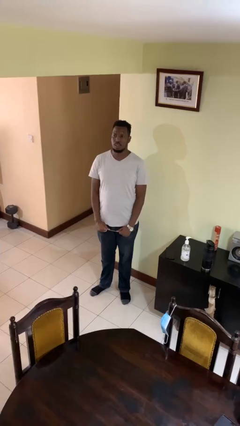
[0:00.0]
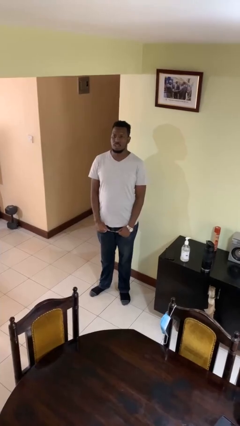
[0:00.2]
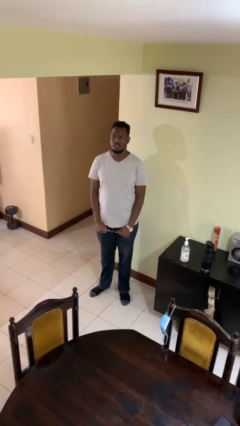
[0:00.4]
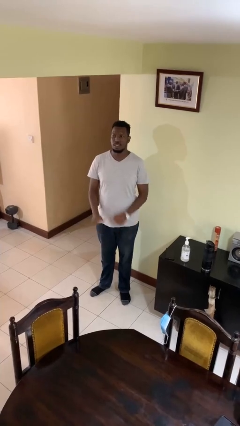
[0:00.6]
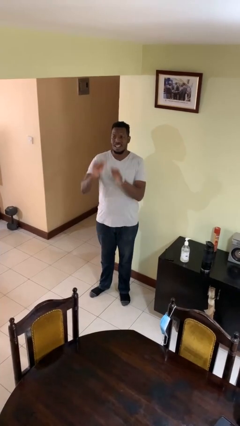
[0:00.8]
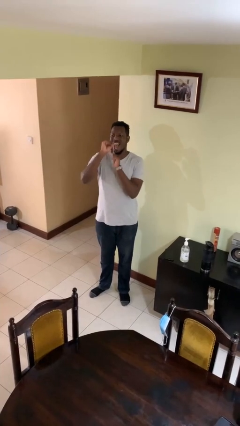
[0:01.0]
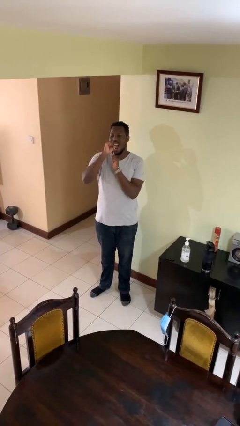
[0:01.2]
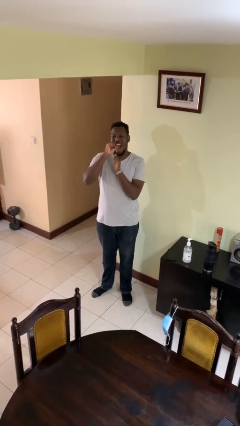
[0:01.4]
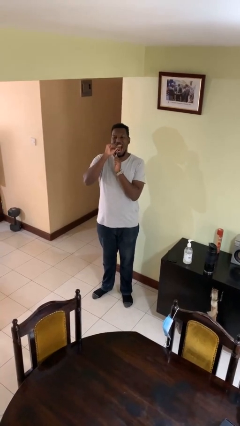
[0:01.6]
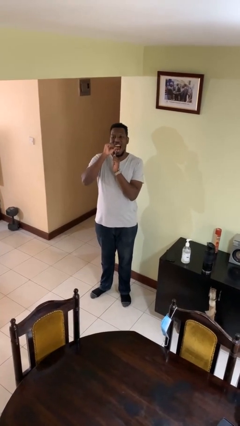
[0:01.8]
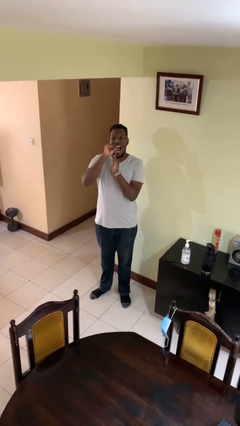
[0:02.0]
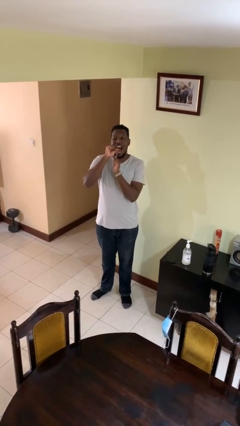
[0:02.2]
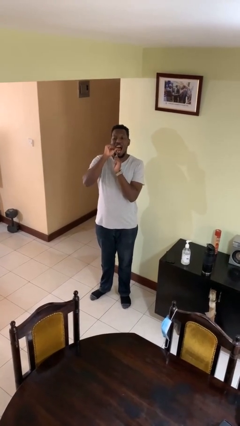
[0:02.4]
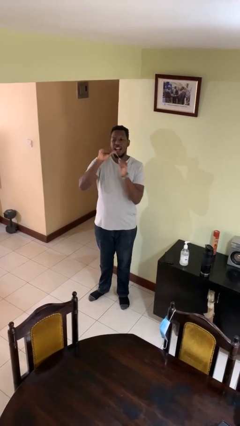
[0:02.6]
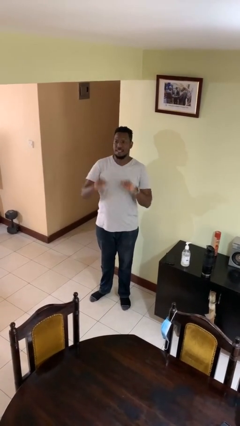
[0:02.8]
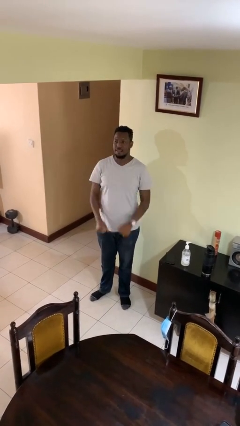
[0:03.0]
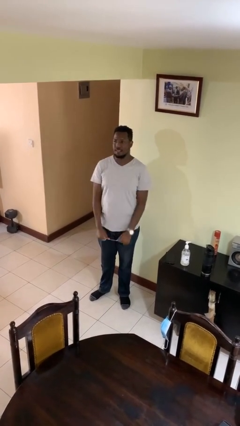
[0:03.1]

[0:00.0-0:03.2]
person flosses

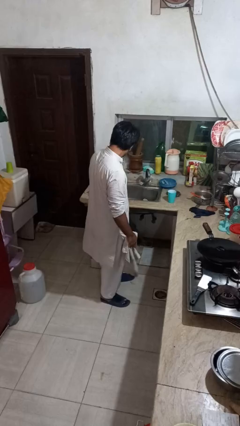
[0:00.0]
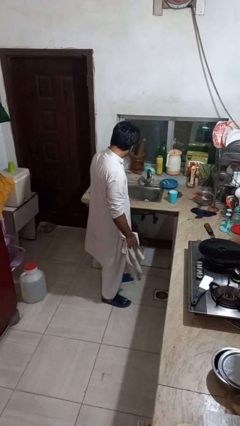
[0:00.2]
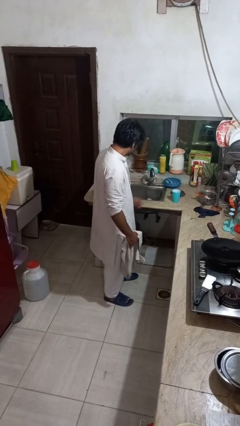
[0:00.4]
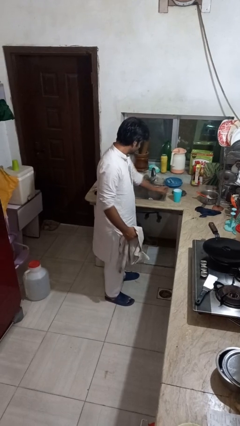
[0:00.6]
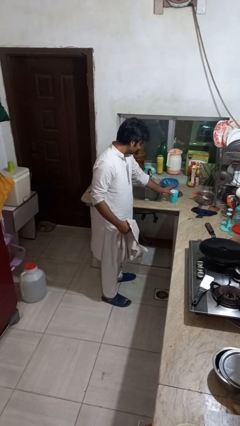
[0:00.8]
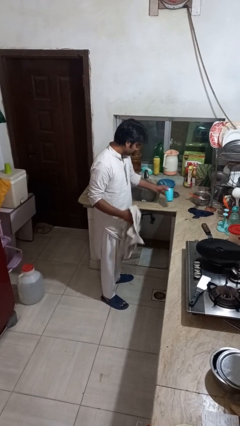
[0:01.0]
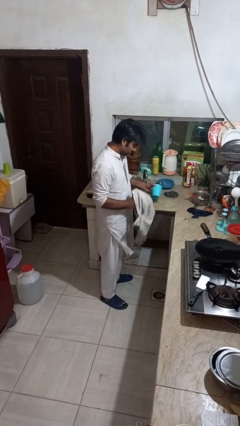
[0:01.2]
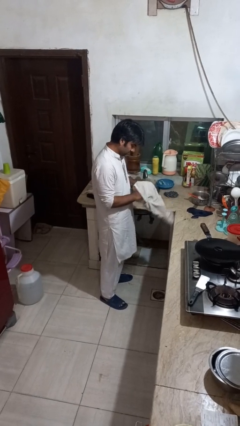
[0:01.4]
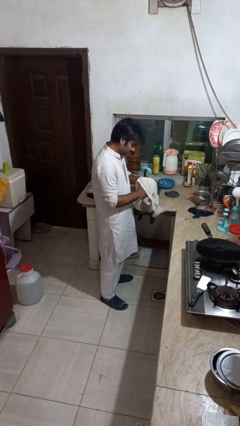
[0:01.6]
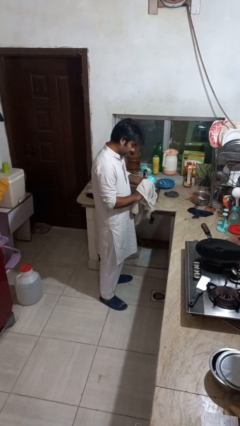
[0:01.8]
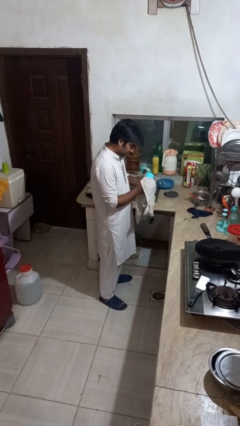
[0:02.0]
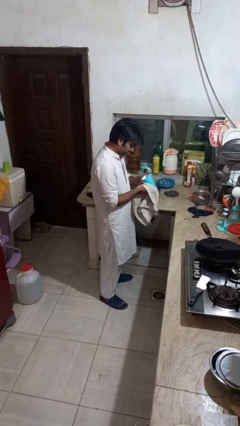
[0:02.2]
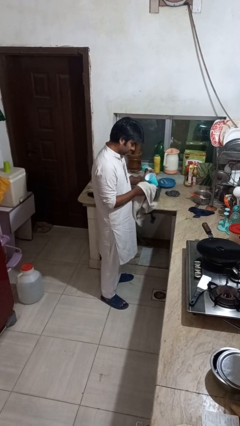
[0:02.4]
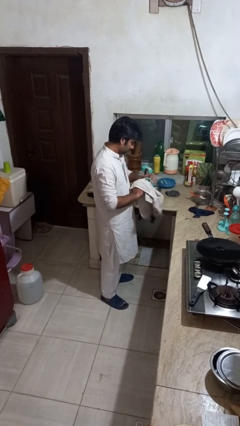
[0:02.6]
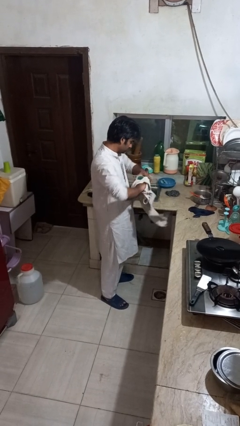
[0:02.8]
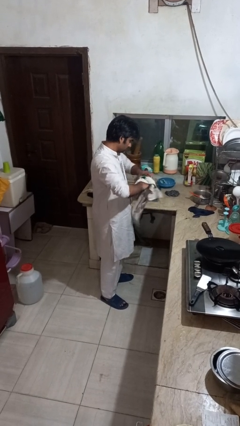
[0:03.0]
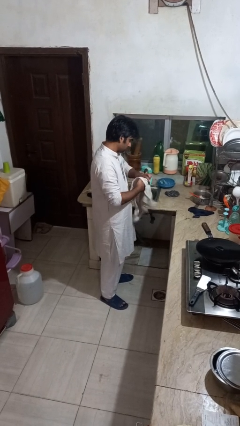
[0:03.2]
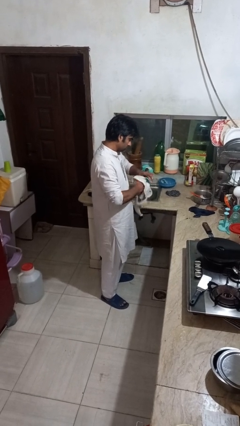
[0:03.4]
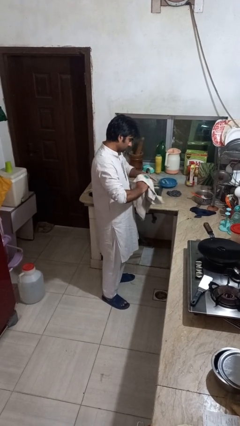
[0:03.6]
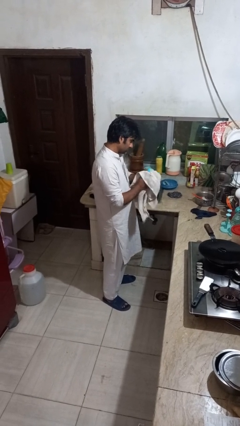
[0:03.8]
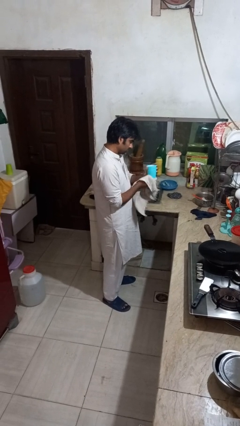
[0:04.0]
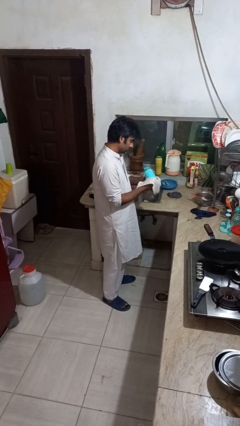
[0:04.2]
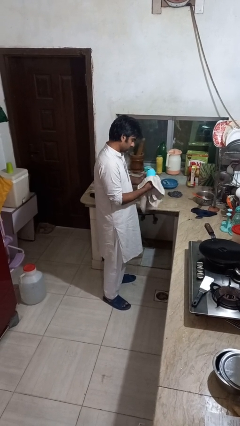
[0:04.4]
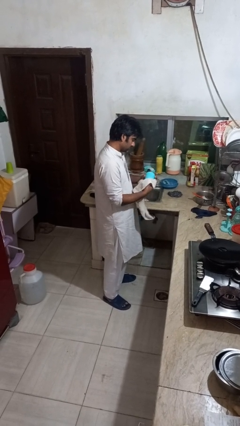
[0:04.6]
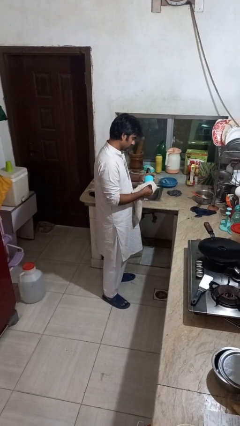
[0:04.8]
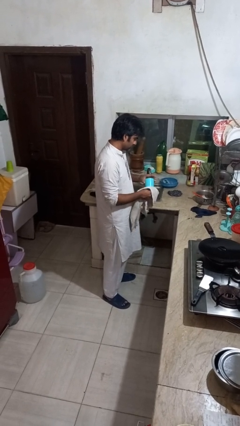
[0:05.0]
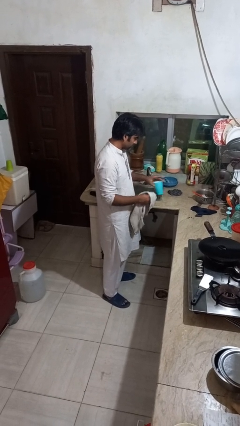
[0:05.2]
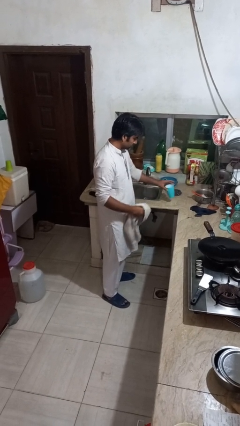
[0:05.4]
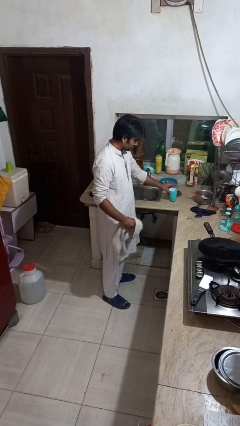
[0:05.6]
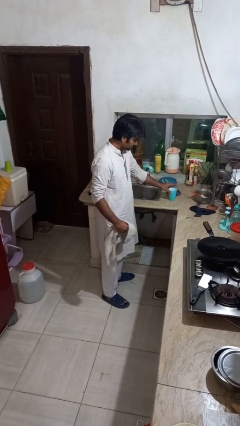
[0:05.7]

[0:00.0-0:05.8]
person dries dish

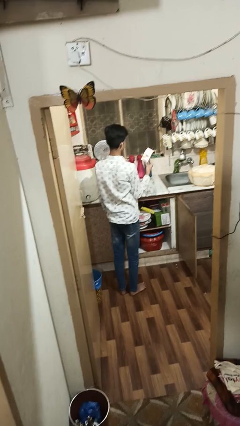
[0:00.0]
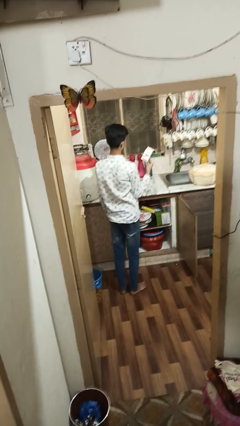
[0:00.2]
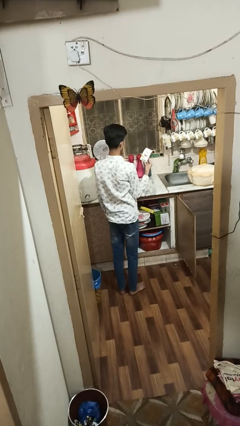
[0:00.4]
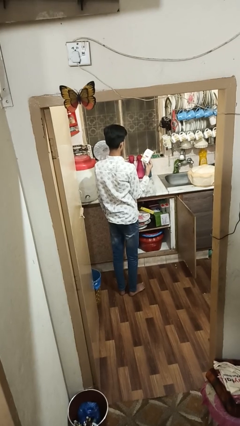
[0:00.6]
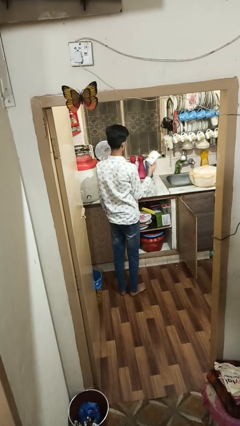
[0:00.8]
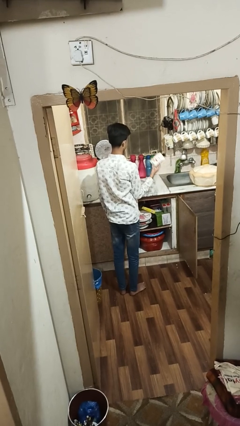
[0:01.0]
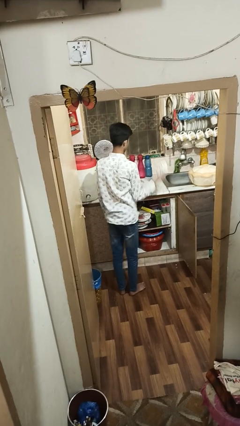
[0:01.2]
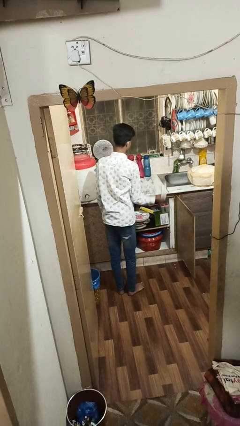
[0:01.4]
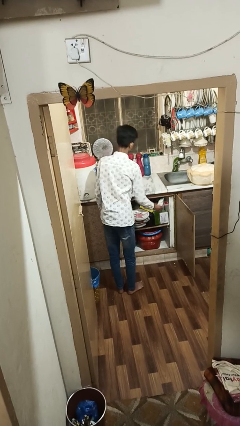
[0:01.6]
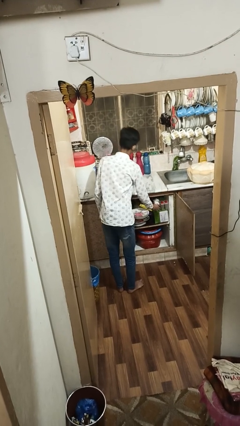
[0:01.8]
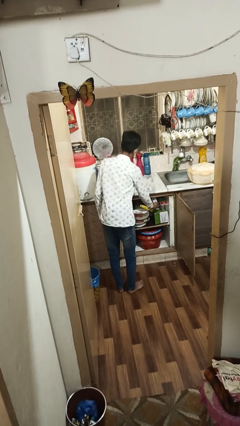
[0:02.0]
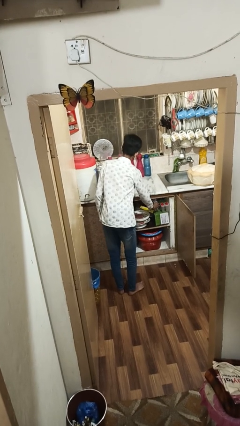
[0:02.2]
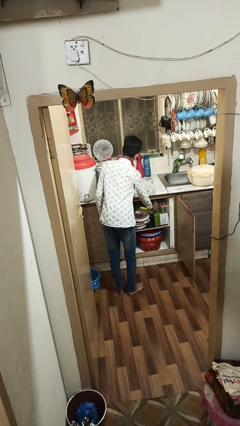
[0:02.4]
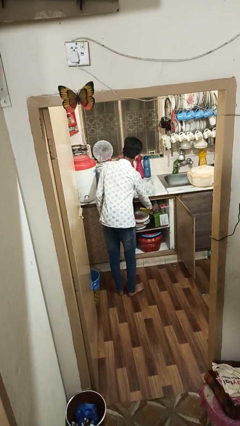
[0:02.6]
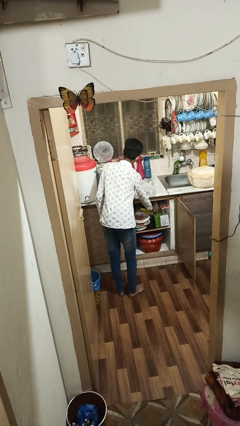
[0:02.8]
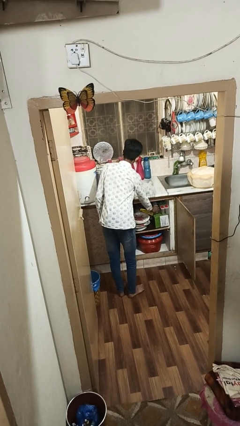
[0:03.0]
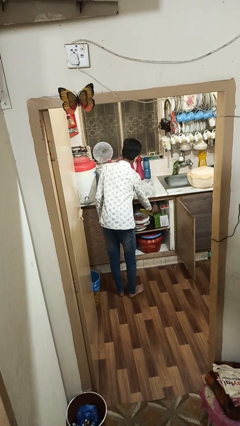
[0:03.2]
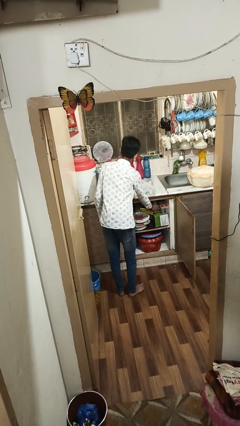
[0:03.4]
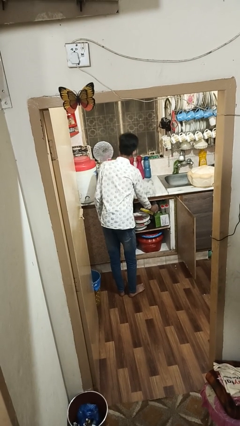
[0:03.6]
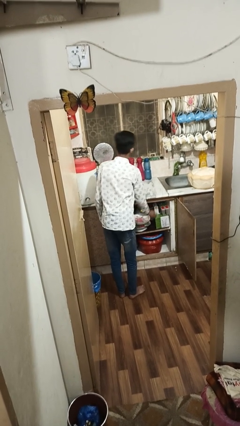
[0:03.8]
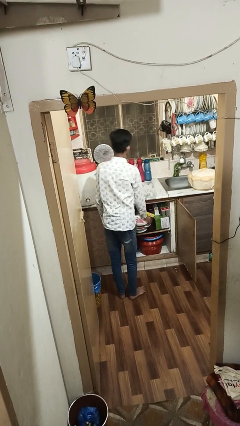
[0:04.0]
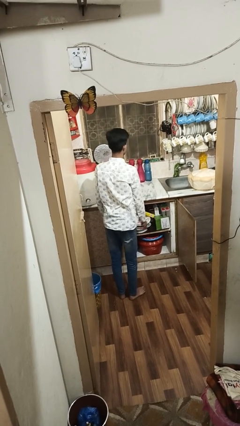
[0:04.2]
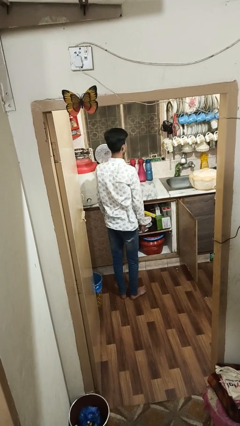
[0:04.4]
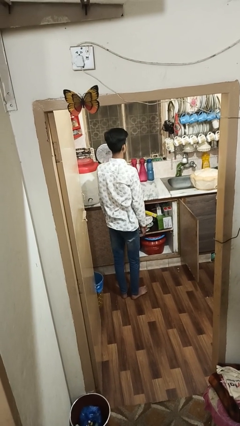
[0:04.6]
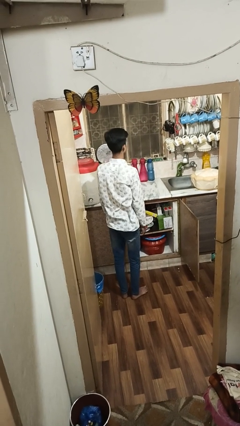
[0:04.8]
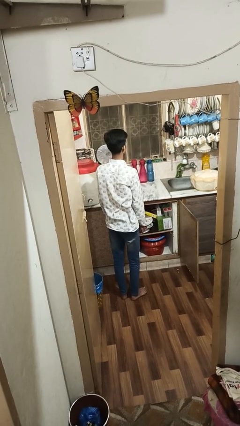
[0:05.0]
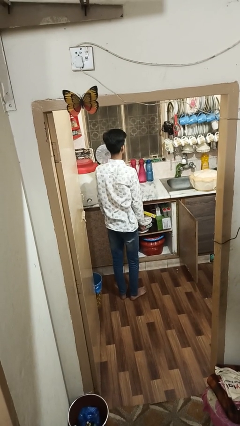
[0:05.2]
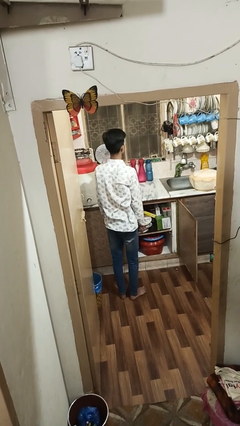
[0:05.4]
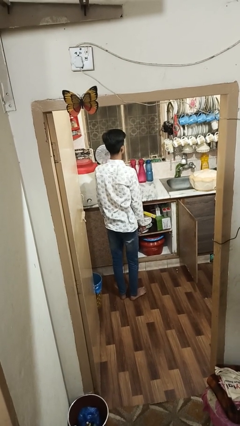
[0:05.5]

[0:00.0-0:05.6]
person puts object in cabinet

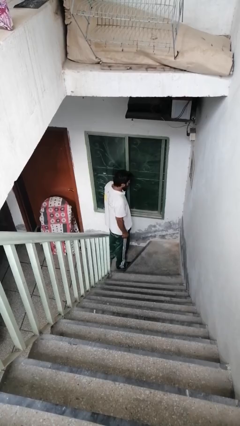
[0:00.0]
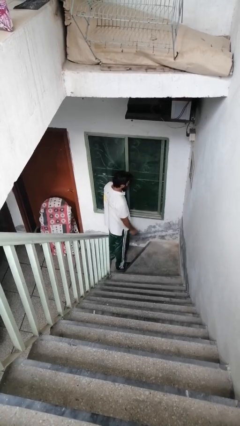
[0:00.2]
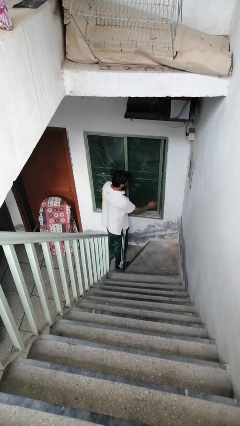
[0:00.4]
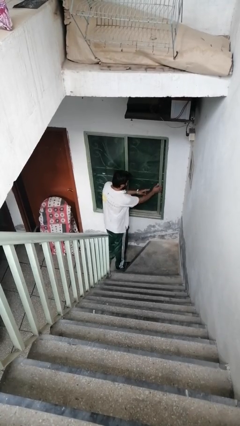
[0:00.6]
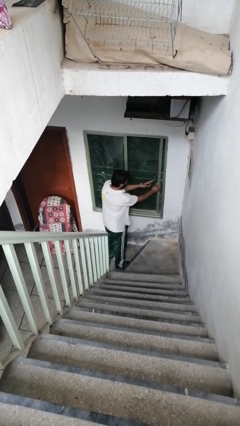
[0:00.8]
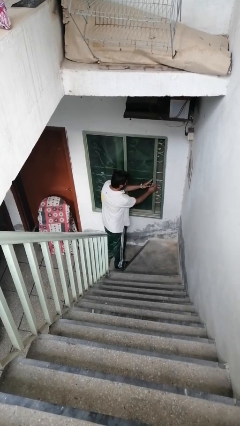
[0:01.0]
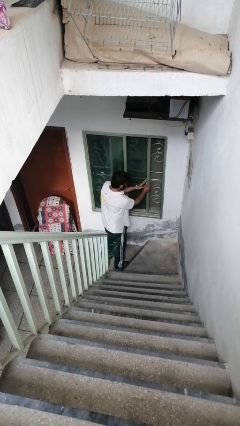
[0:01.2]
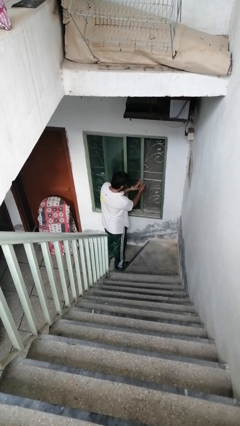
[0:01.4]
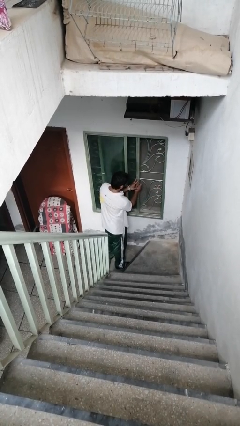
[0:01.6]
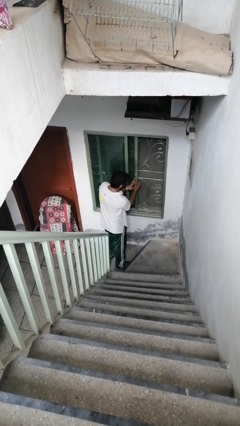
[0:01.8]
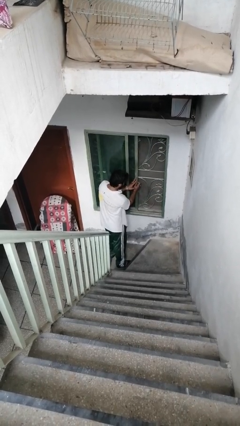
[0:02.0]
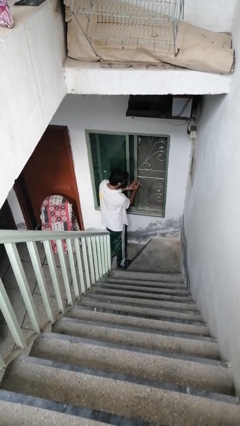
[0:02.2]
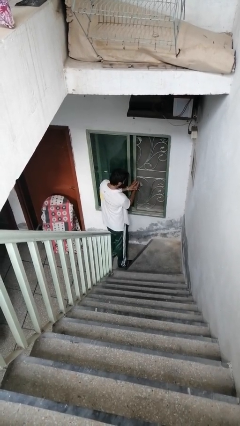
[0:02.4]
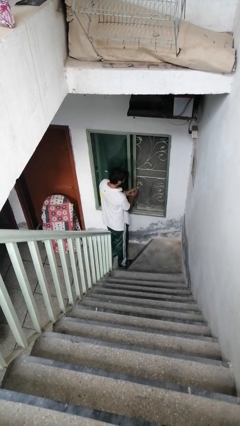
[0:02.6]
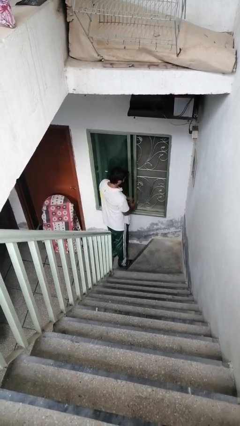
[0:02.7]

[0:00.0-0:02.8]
person opens home window

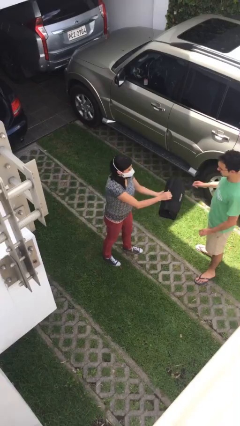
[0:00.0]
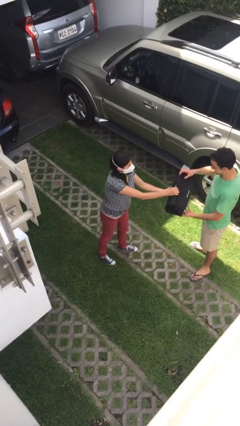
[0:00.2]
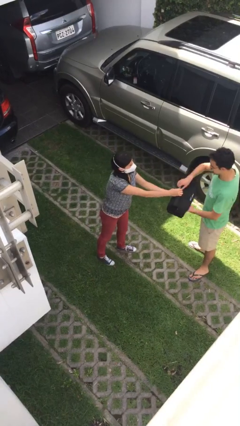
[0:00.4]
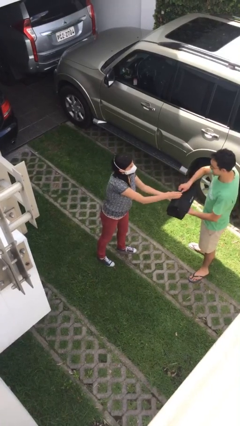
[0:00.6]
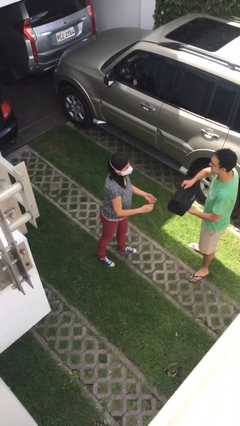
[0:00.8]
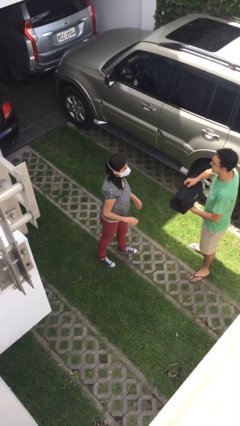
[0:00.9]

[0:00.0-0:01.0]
person transfers object to person
